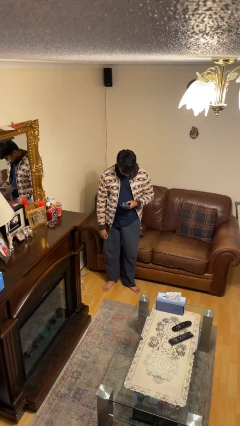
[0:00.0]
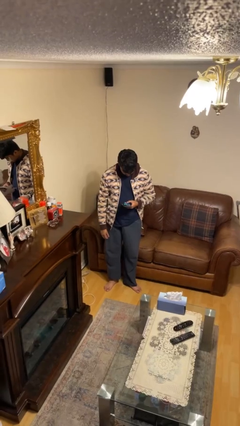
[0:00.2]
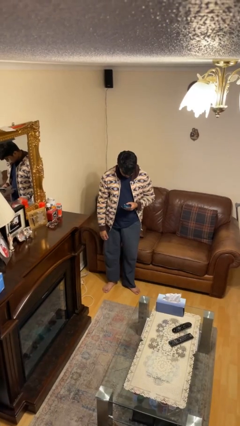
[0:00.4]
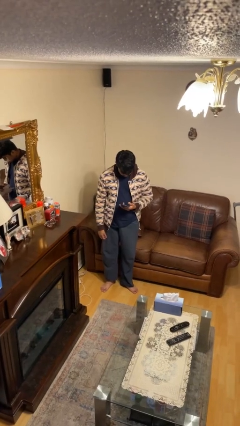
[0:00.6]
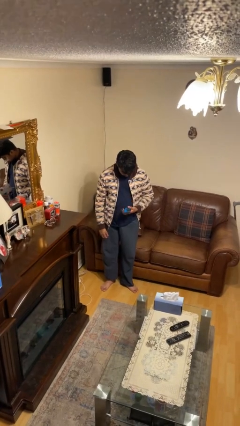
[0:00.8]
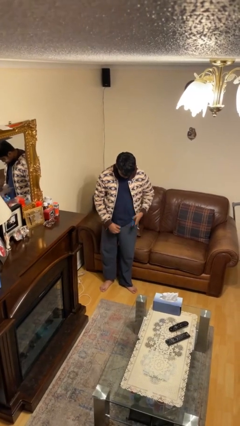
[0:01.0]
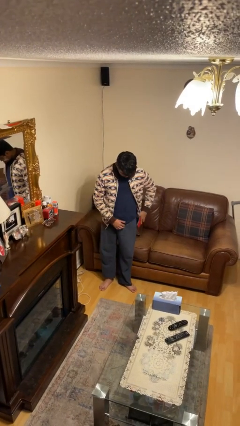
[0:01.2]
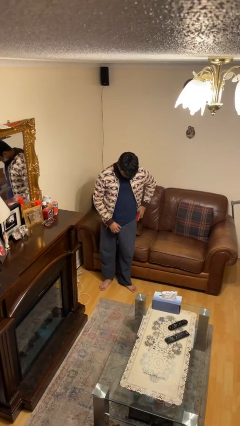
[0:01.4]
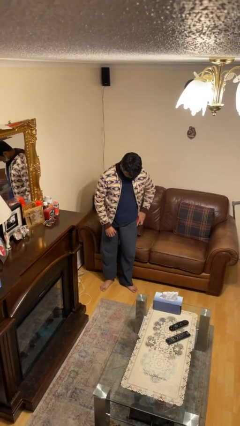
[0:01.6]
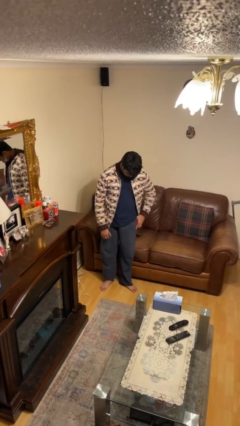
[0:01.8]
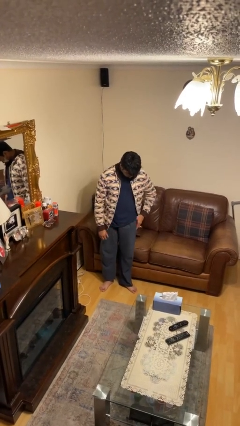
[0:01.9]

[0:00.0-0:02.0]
person puts phone into pocket

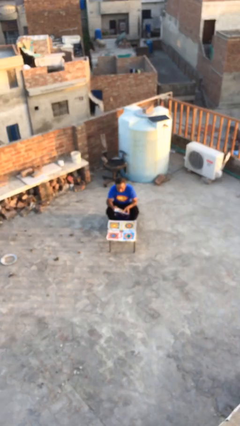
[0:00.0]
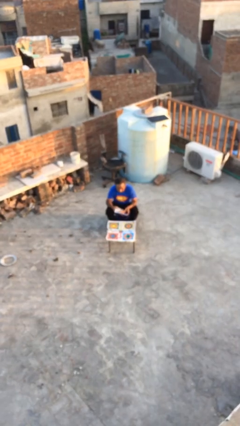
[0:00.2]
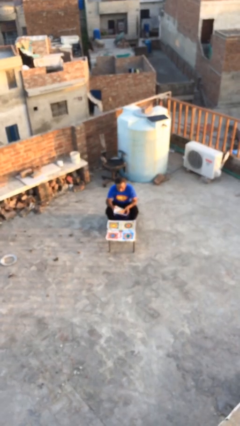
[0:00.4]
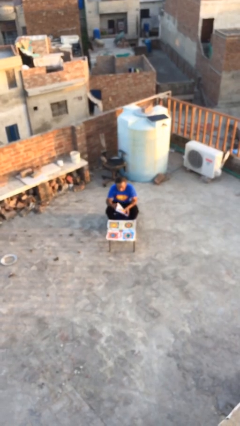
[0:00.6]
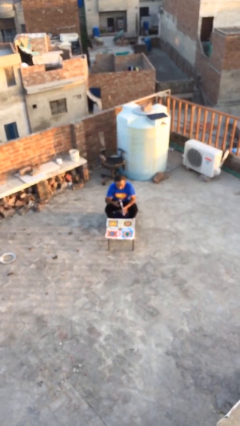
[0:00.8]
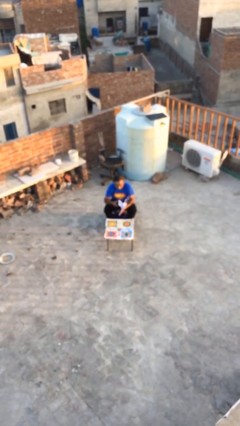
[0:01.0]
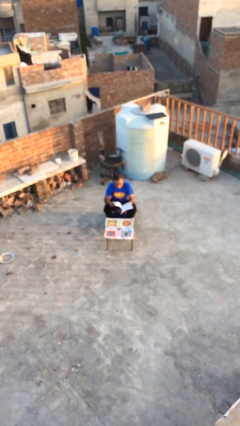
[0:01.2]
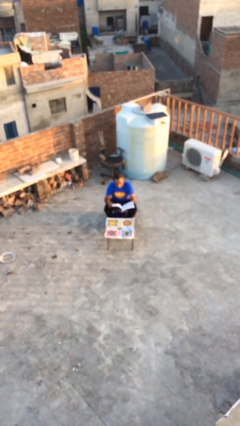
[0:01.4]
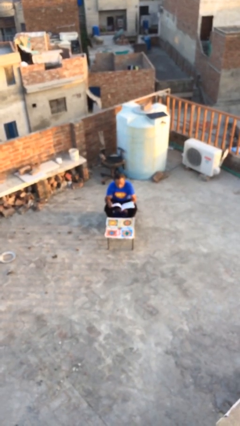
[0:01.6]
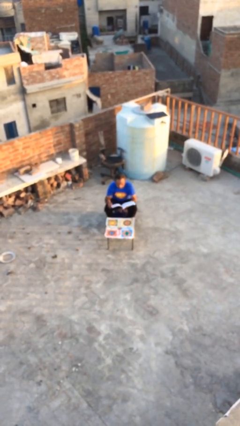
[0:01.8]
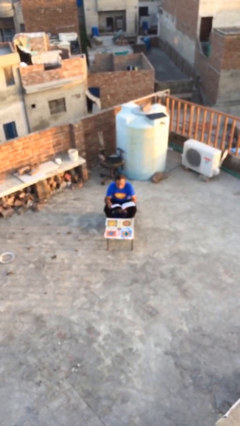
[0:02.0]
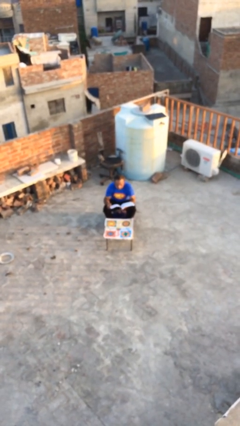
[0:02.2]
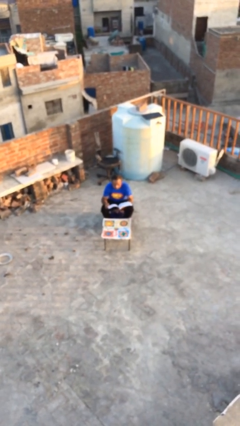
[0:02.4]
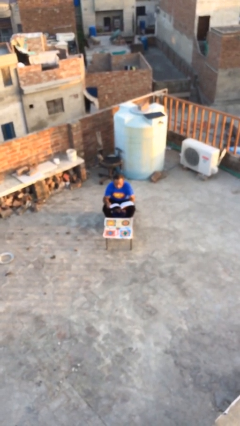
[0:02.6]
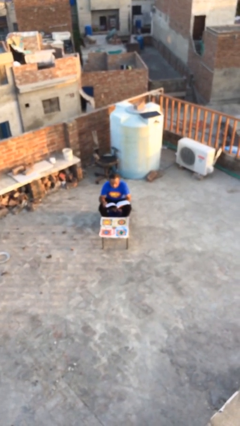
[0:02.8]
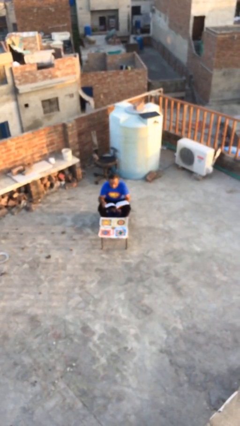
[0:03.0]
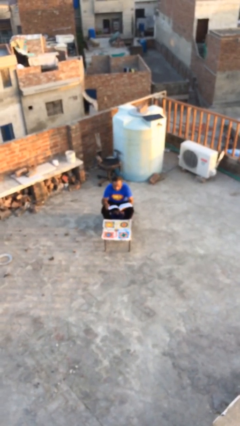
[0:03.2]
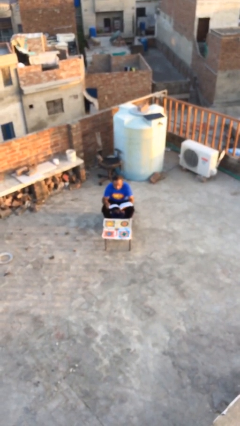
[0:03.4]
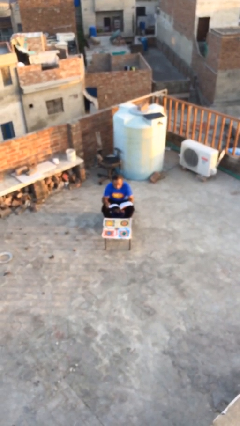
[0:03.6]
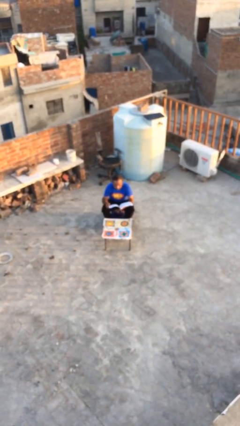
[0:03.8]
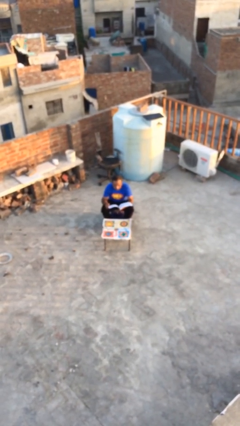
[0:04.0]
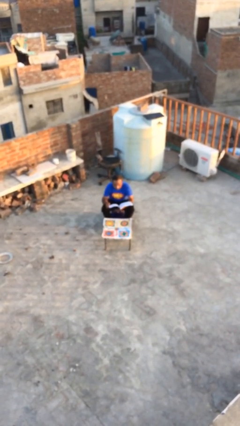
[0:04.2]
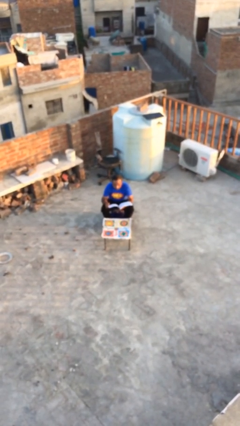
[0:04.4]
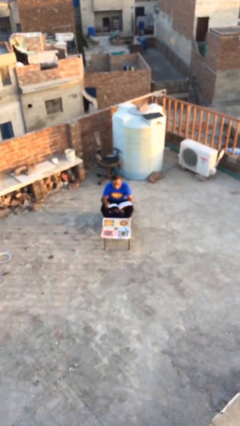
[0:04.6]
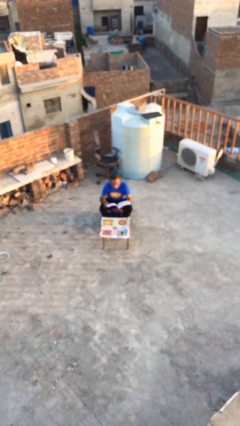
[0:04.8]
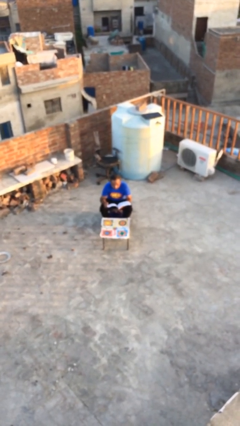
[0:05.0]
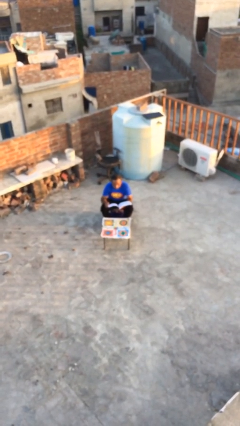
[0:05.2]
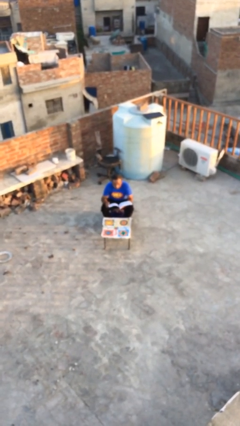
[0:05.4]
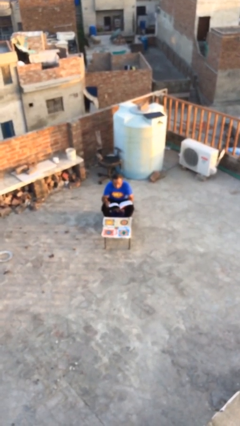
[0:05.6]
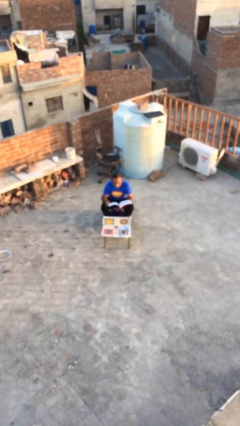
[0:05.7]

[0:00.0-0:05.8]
person reads document

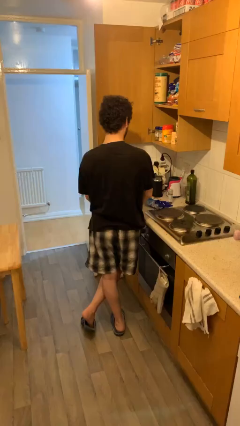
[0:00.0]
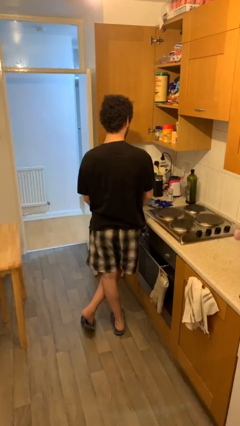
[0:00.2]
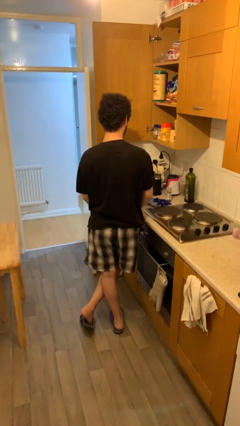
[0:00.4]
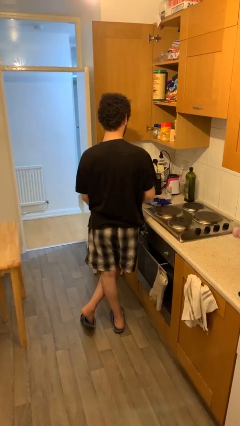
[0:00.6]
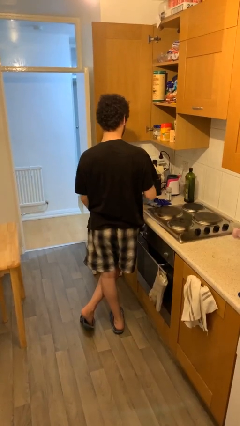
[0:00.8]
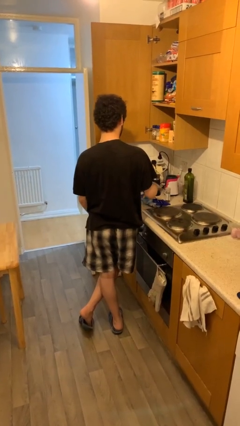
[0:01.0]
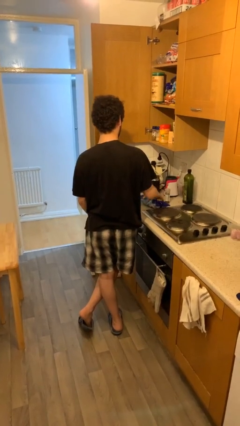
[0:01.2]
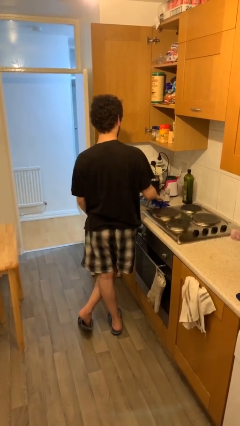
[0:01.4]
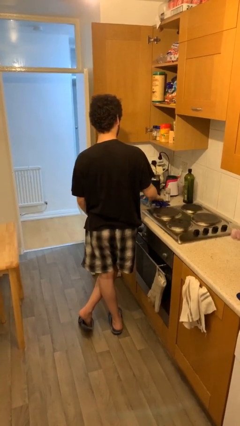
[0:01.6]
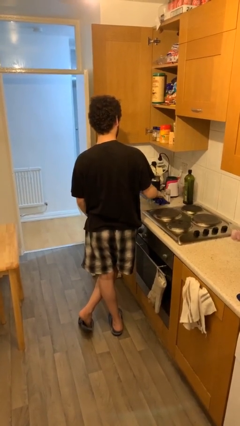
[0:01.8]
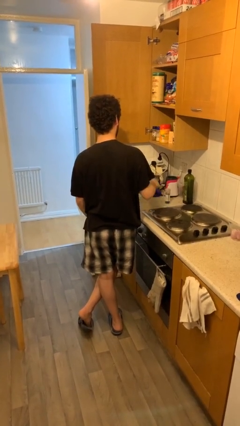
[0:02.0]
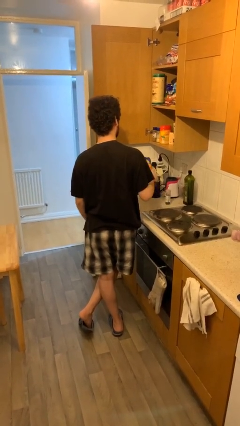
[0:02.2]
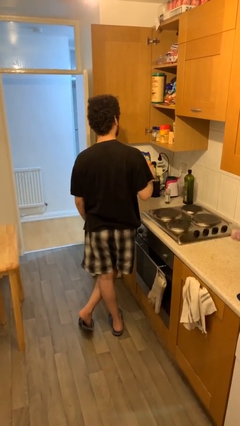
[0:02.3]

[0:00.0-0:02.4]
person picks up object from table

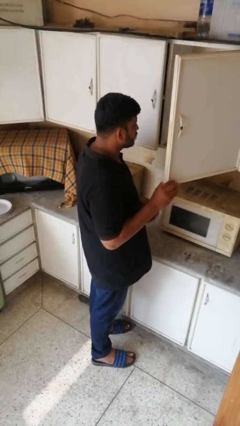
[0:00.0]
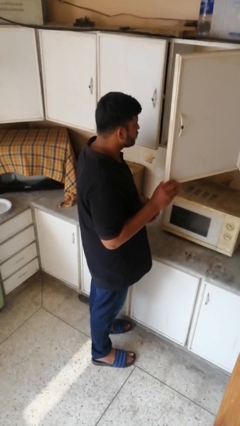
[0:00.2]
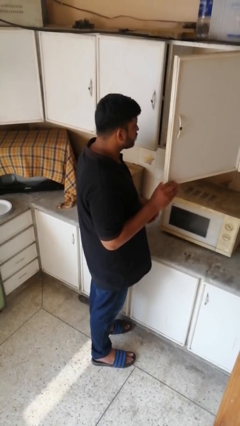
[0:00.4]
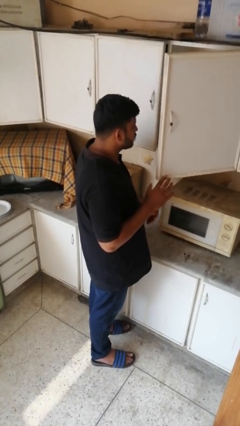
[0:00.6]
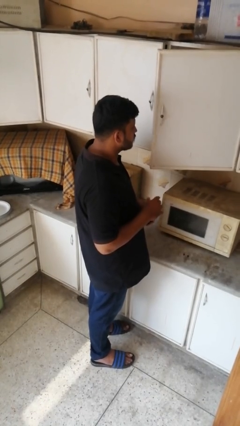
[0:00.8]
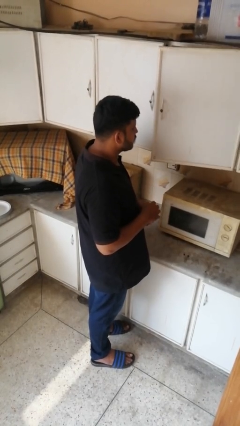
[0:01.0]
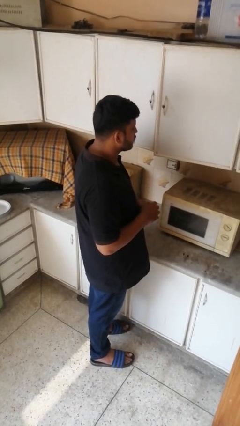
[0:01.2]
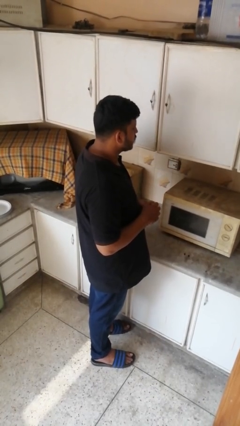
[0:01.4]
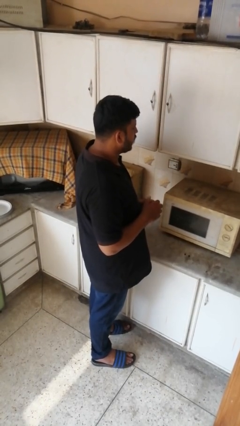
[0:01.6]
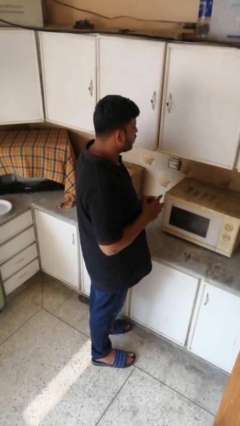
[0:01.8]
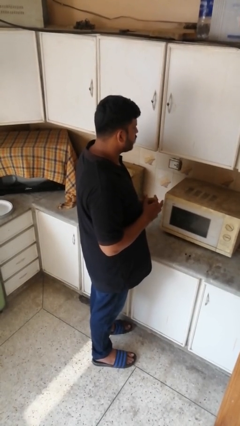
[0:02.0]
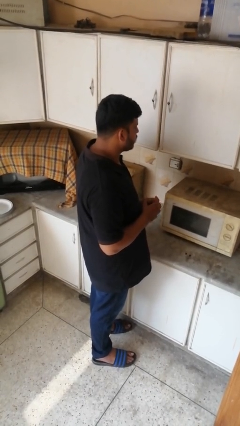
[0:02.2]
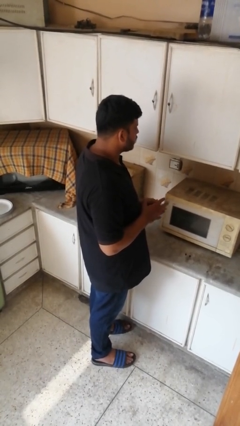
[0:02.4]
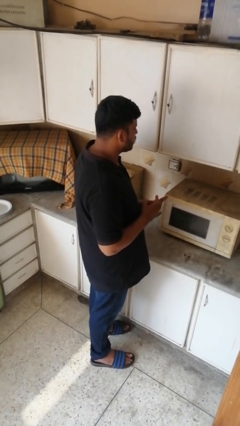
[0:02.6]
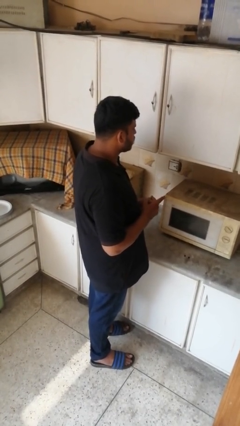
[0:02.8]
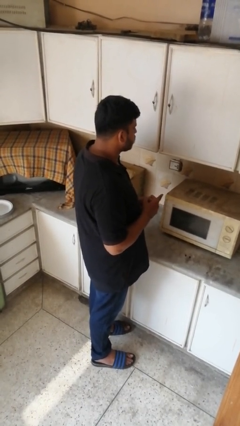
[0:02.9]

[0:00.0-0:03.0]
person closes cabinet

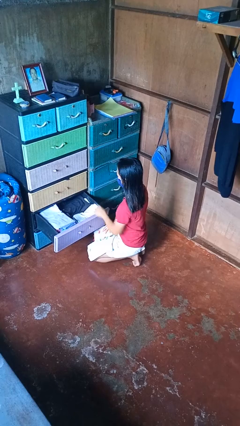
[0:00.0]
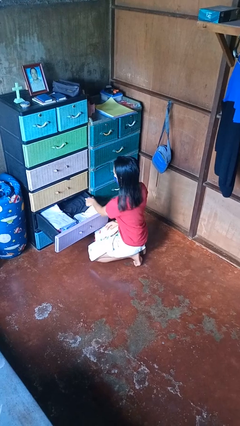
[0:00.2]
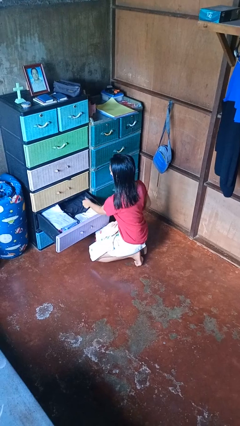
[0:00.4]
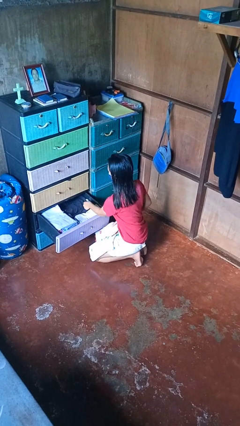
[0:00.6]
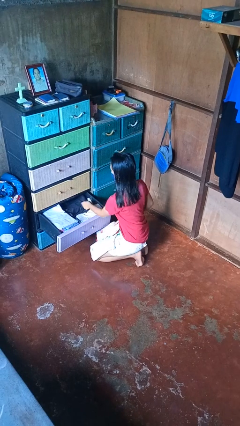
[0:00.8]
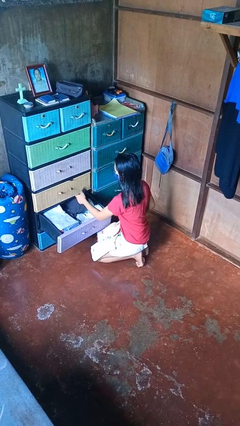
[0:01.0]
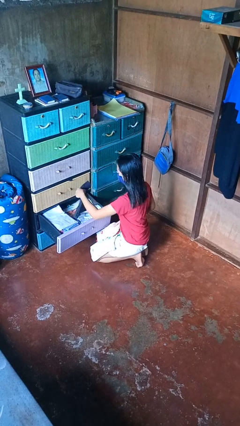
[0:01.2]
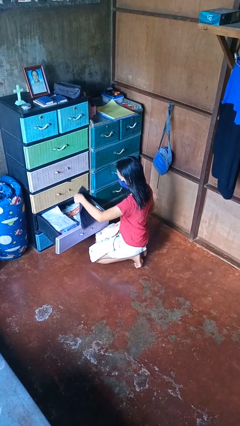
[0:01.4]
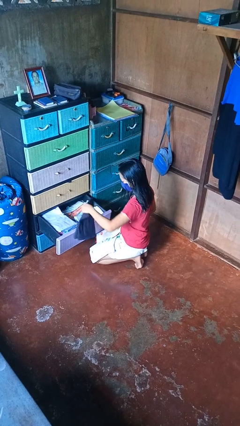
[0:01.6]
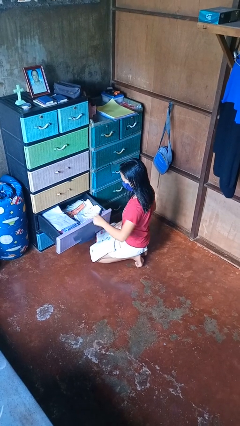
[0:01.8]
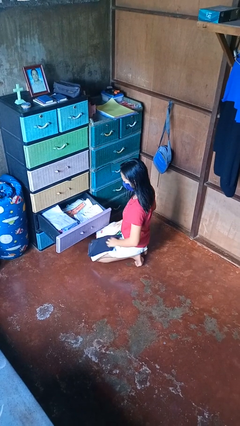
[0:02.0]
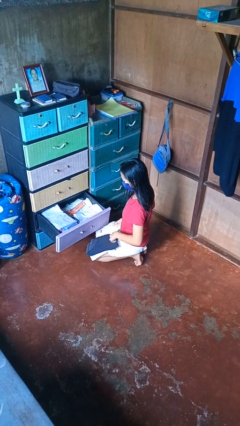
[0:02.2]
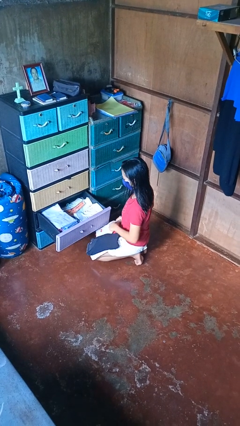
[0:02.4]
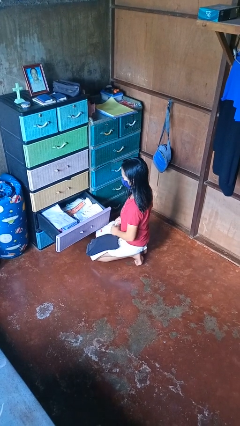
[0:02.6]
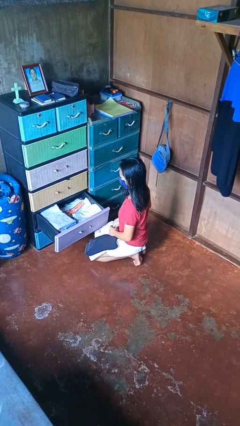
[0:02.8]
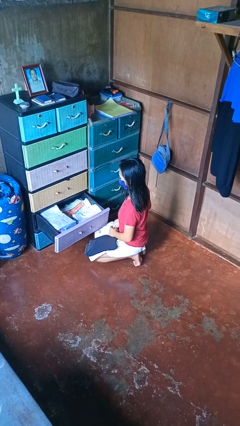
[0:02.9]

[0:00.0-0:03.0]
person takes clothes from dresser

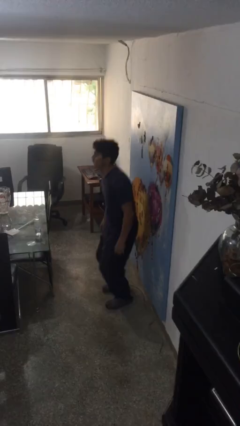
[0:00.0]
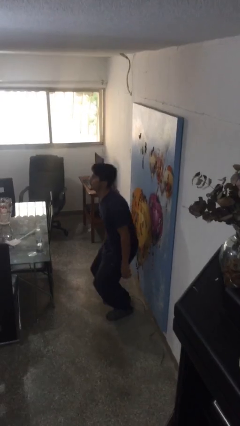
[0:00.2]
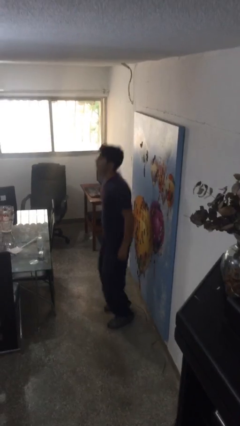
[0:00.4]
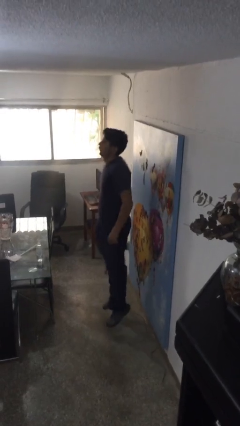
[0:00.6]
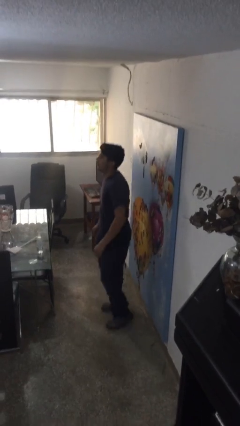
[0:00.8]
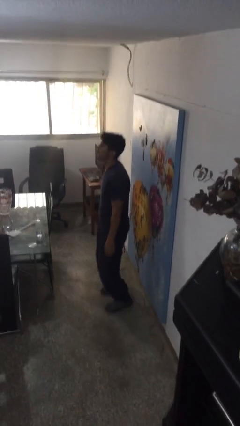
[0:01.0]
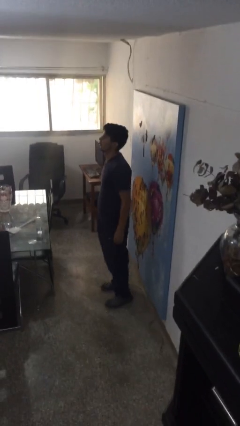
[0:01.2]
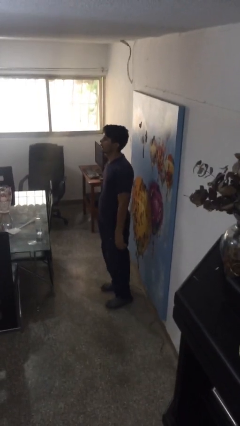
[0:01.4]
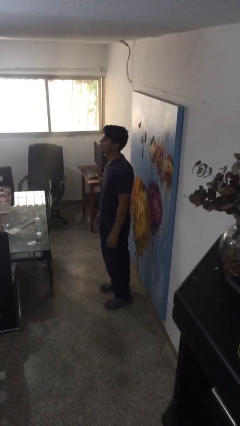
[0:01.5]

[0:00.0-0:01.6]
person jumps
